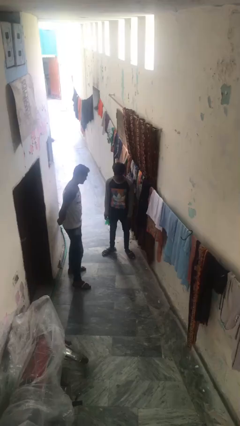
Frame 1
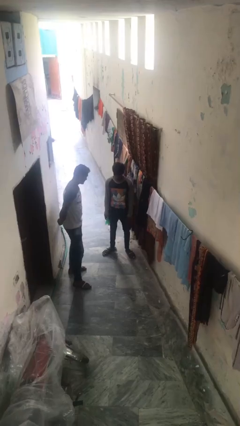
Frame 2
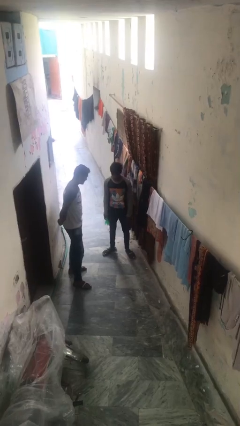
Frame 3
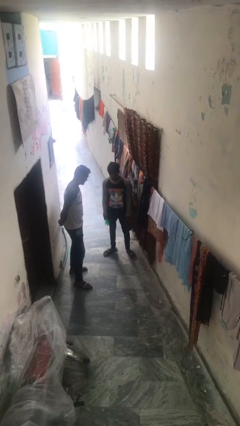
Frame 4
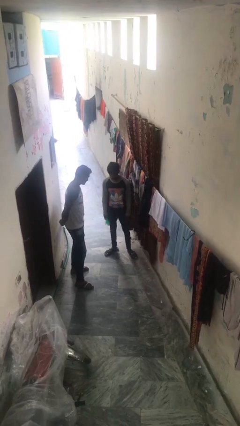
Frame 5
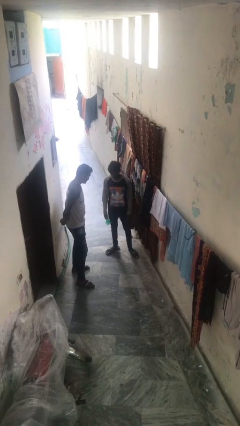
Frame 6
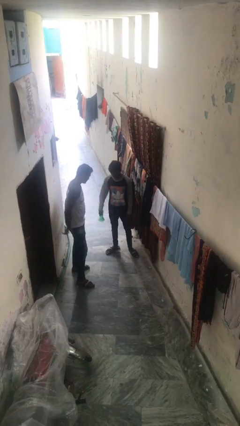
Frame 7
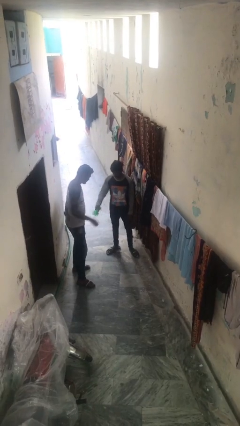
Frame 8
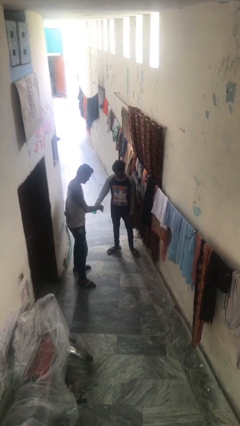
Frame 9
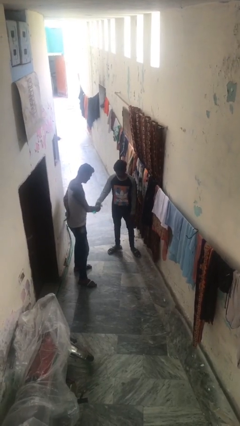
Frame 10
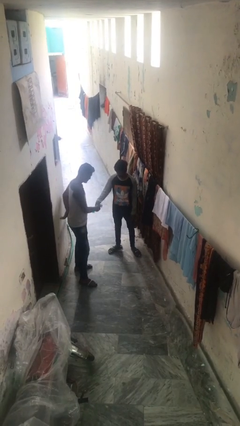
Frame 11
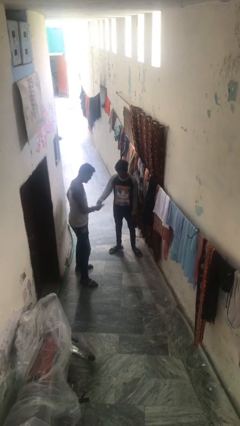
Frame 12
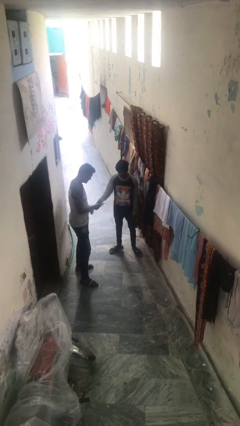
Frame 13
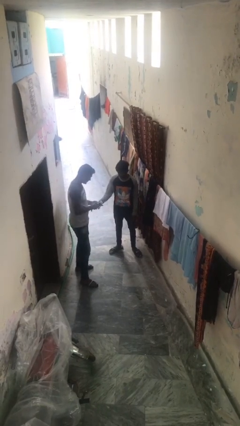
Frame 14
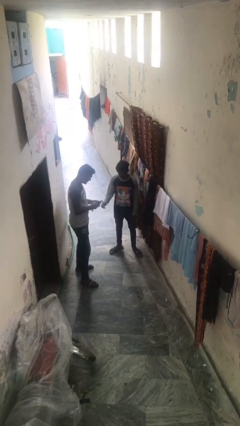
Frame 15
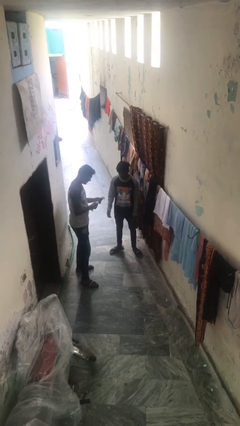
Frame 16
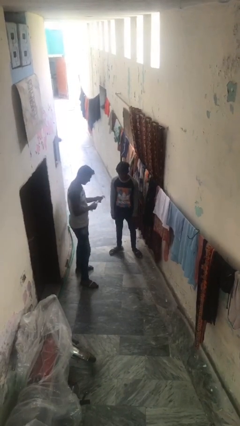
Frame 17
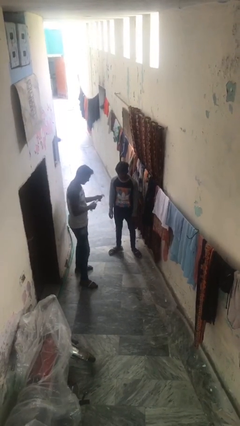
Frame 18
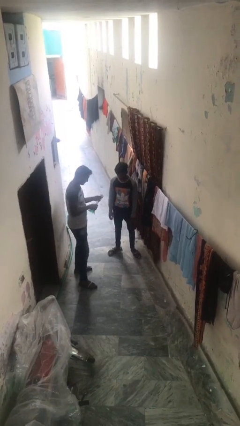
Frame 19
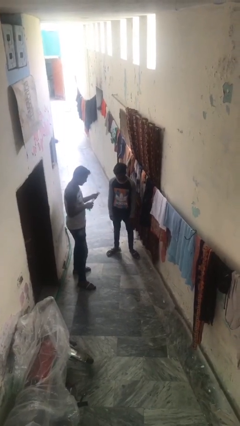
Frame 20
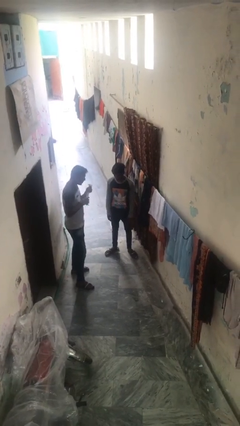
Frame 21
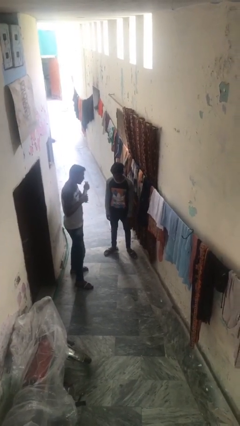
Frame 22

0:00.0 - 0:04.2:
person transfers object to person

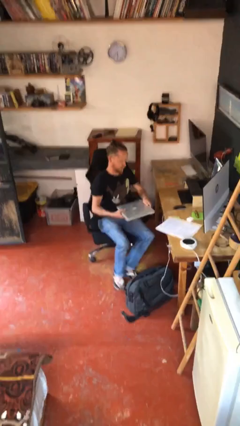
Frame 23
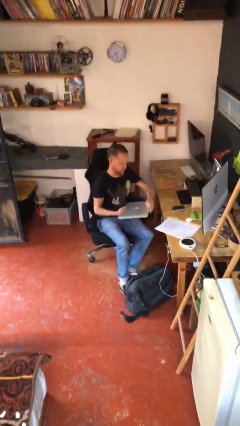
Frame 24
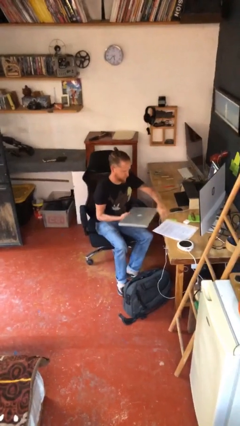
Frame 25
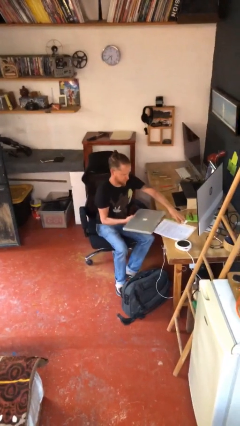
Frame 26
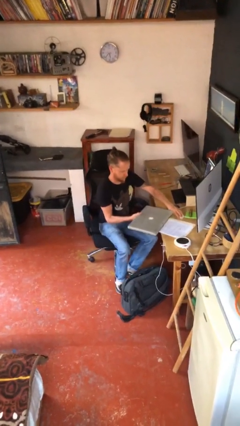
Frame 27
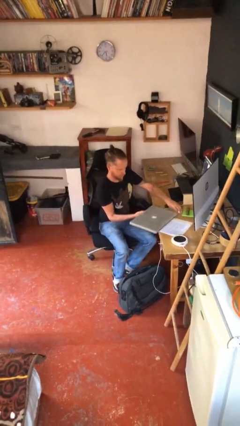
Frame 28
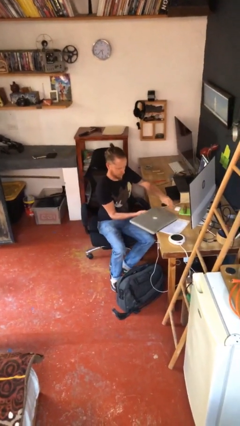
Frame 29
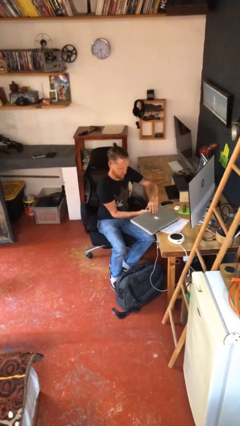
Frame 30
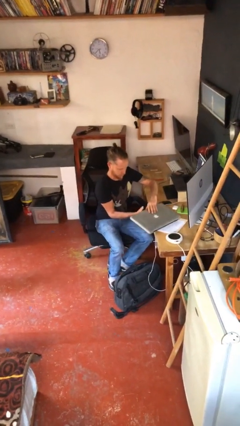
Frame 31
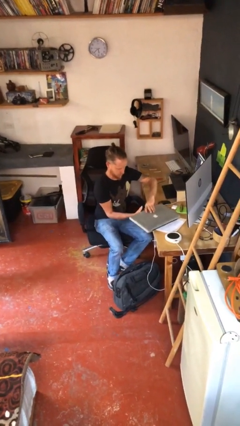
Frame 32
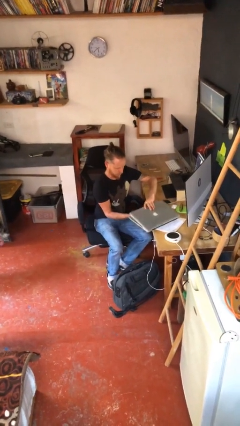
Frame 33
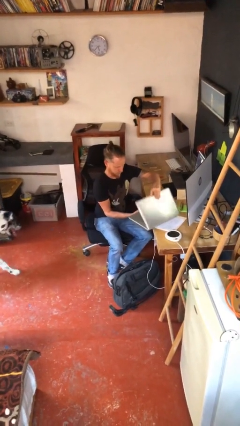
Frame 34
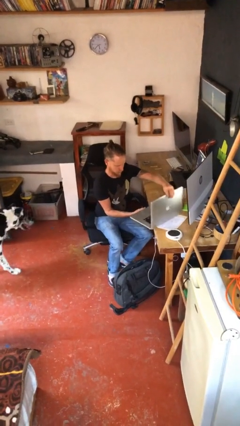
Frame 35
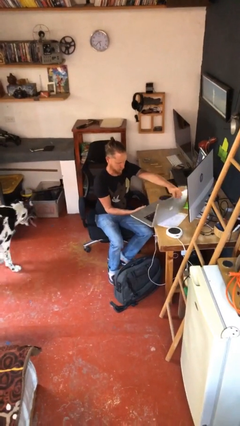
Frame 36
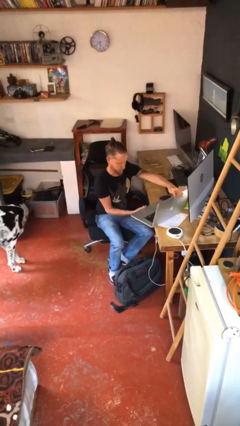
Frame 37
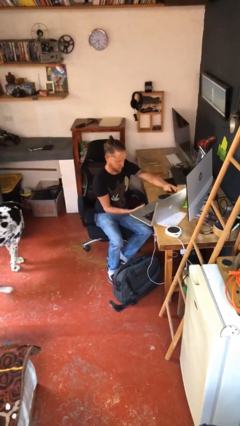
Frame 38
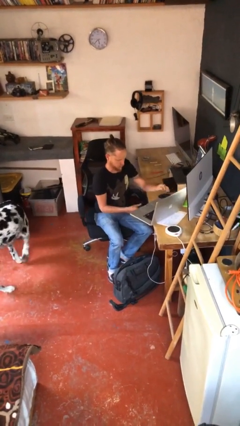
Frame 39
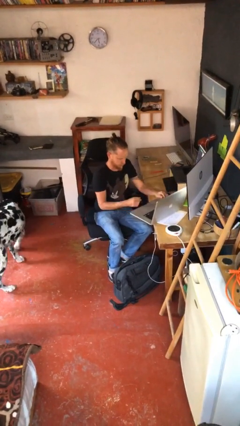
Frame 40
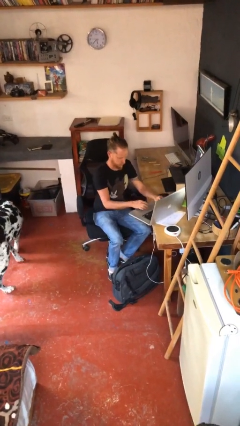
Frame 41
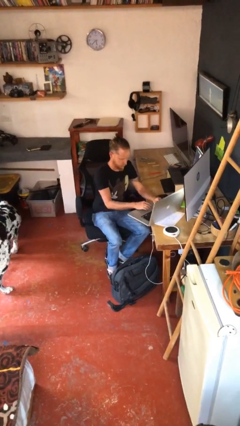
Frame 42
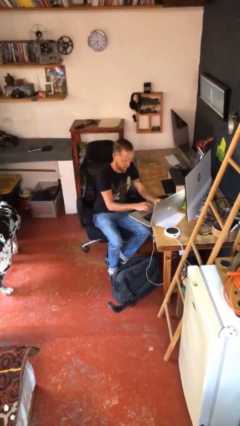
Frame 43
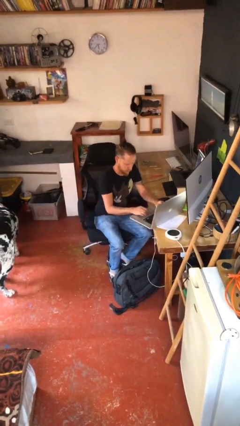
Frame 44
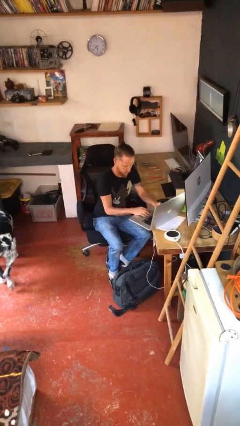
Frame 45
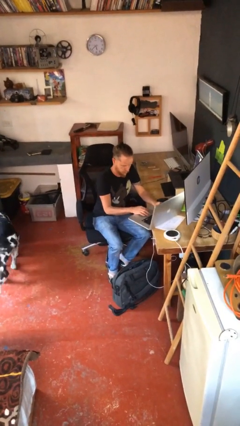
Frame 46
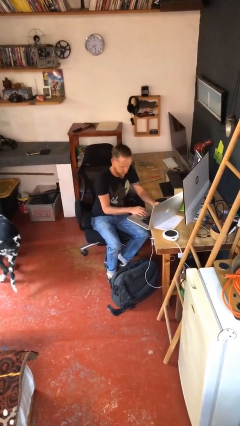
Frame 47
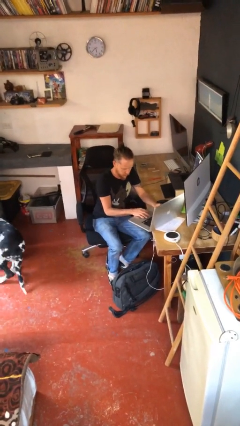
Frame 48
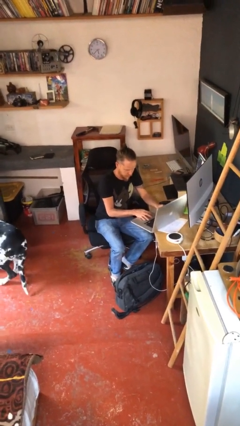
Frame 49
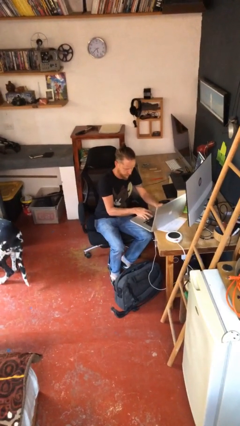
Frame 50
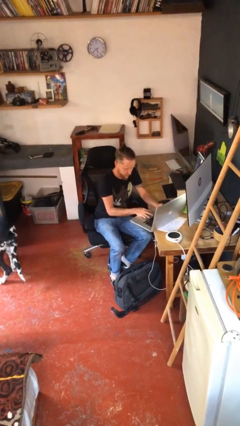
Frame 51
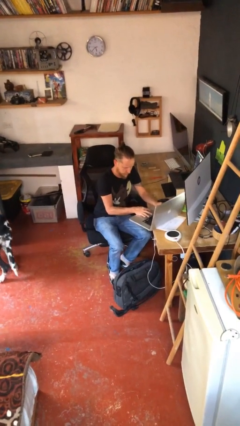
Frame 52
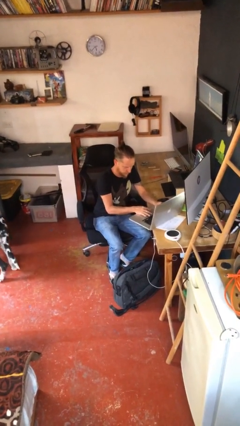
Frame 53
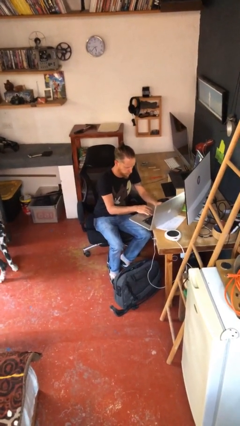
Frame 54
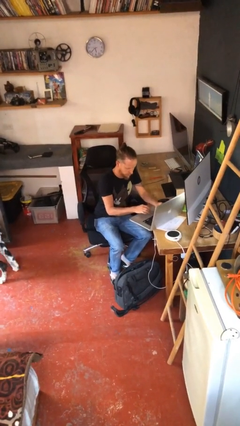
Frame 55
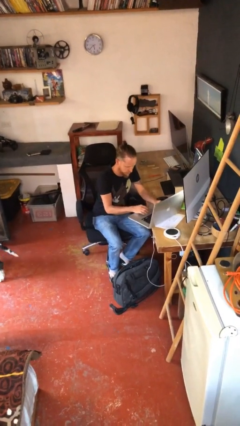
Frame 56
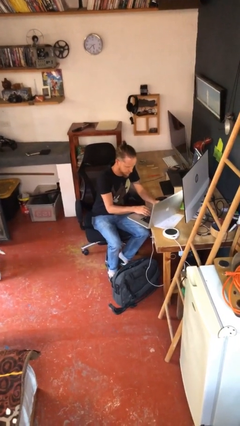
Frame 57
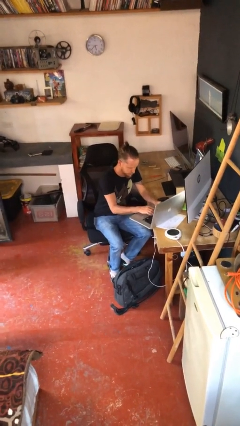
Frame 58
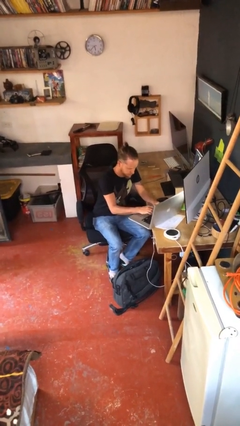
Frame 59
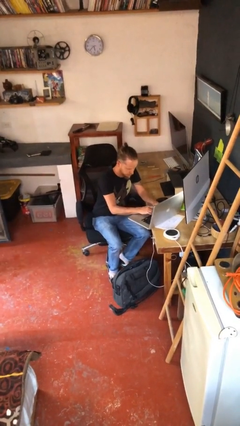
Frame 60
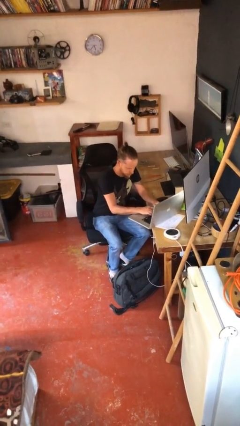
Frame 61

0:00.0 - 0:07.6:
person interacts with laptop

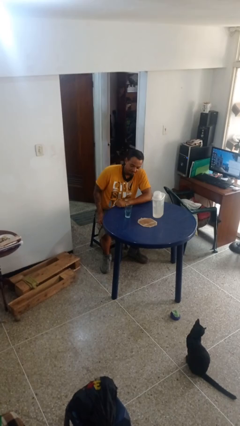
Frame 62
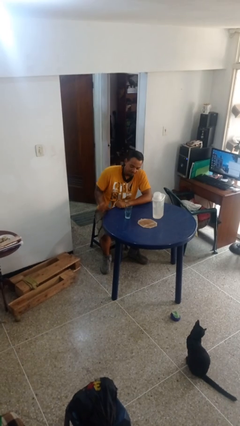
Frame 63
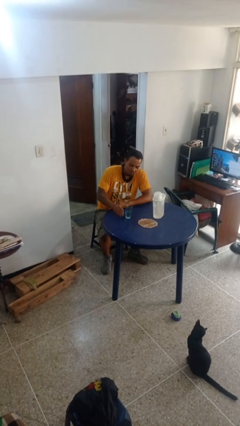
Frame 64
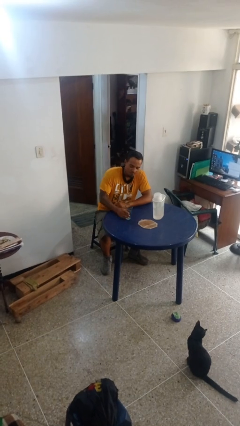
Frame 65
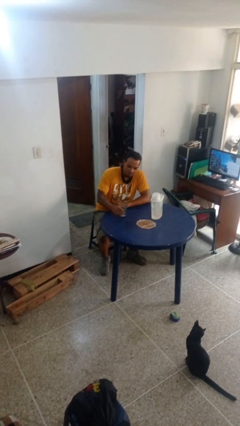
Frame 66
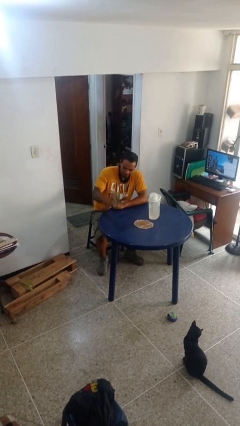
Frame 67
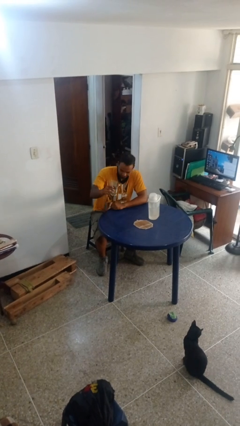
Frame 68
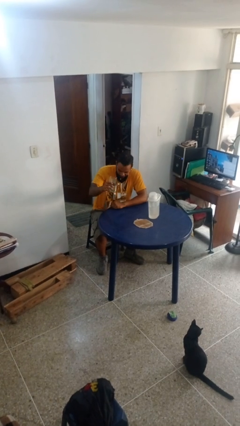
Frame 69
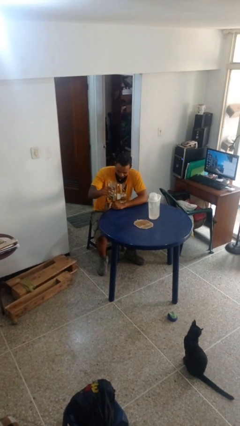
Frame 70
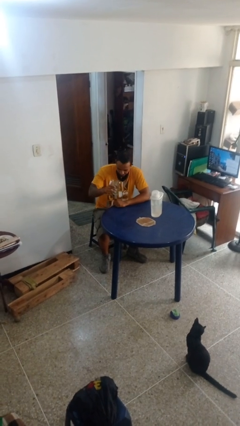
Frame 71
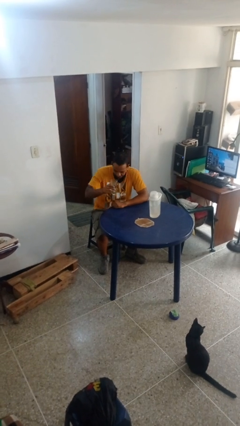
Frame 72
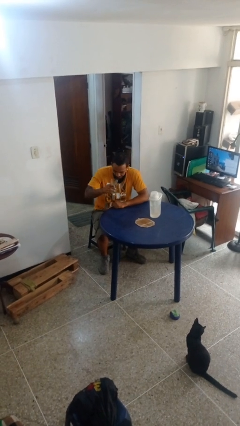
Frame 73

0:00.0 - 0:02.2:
person picks up object from table

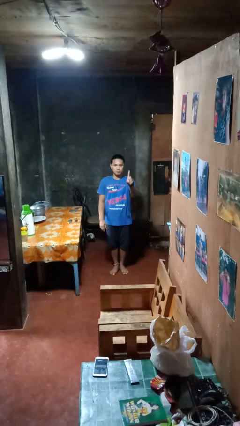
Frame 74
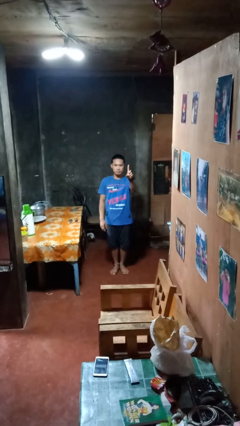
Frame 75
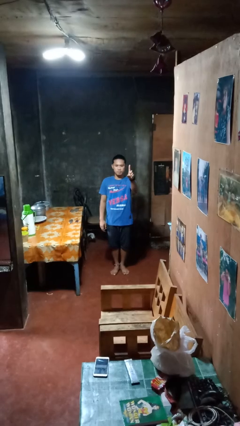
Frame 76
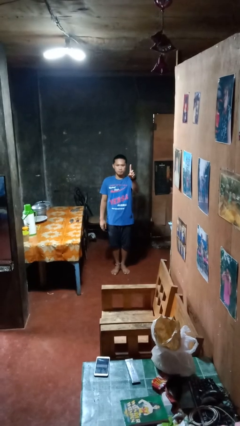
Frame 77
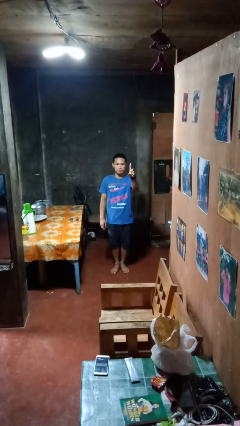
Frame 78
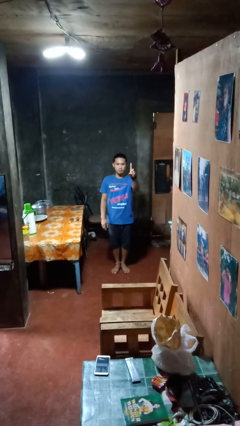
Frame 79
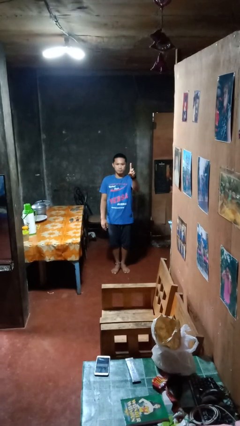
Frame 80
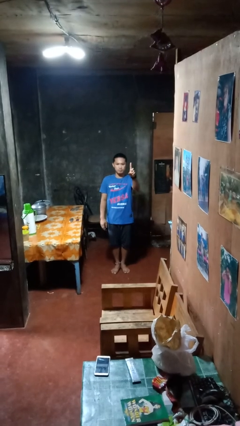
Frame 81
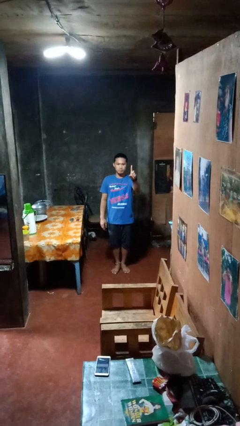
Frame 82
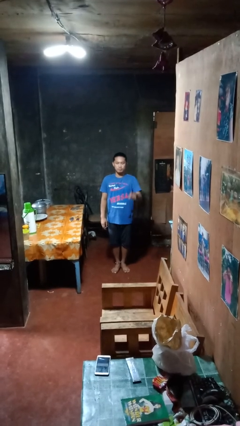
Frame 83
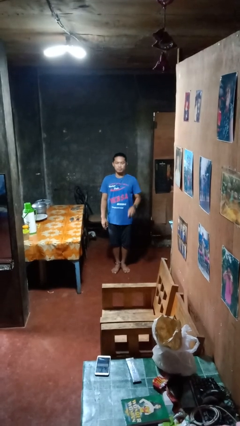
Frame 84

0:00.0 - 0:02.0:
person gestures number one

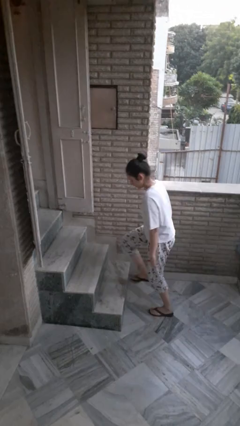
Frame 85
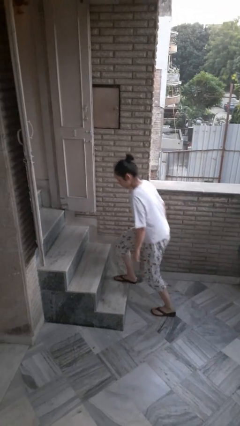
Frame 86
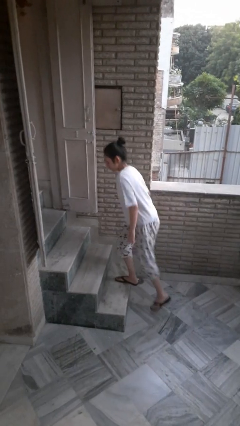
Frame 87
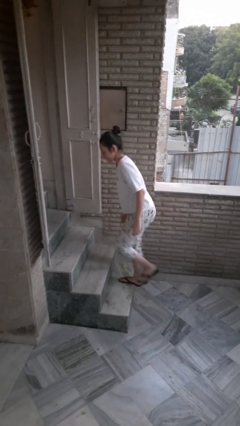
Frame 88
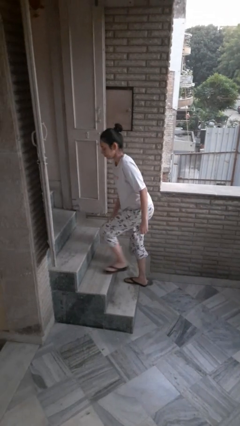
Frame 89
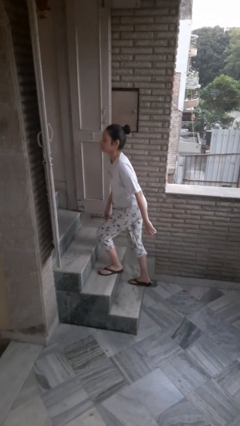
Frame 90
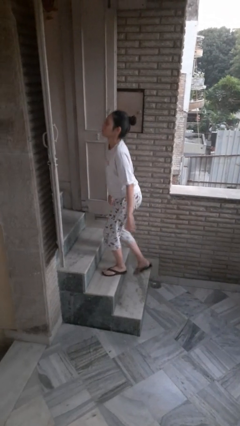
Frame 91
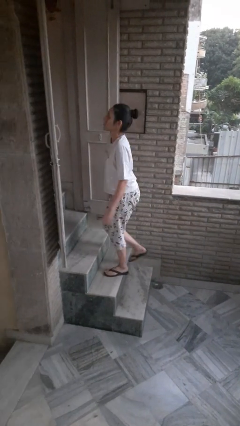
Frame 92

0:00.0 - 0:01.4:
person climbs up stairs
